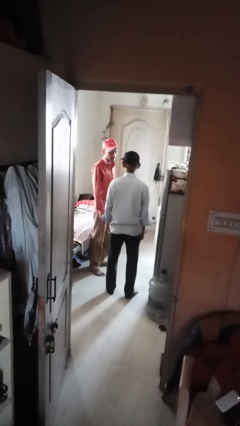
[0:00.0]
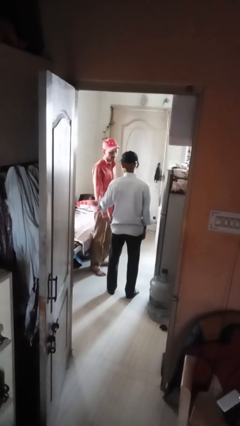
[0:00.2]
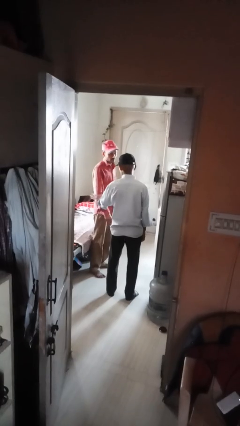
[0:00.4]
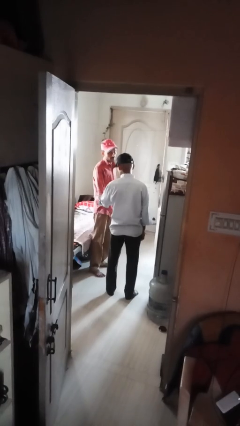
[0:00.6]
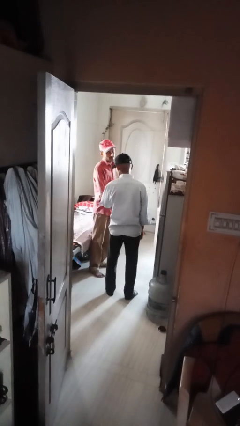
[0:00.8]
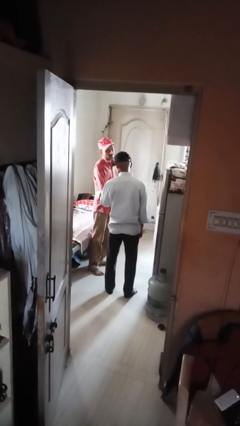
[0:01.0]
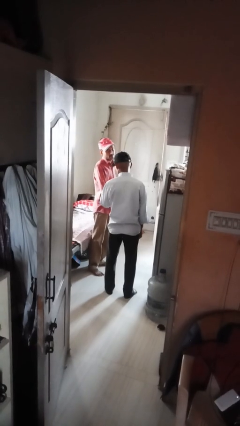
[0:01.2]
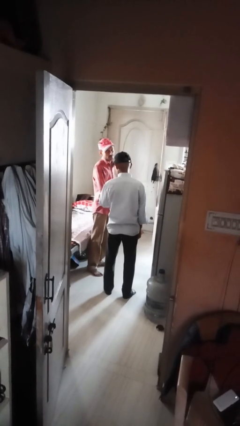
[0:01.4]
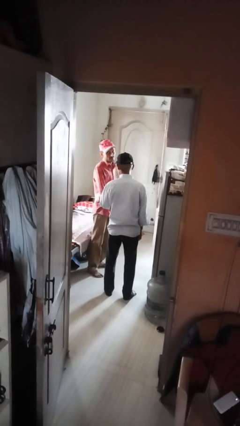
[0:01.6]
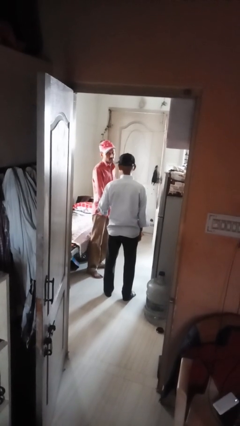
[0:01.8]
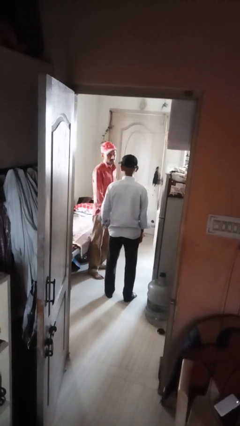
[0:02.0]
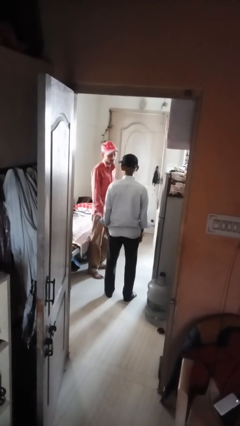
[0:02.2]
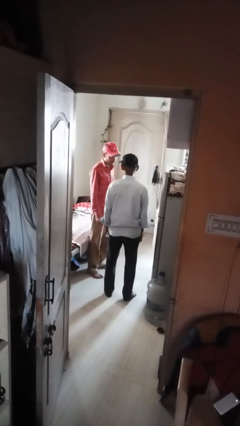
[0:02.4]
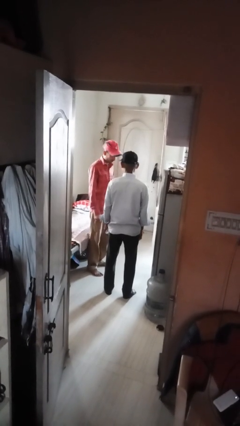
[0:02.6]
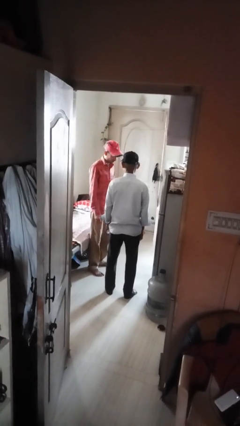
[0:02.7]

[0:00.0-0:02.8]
person grabs person by forearm

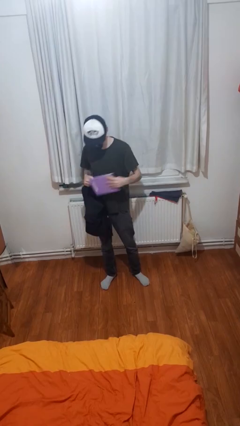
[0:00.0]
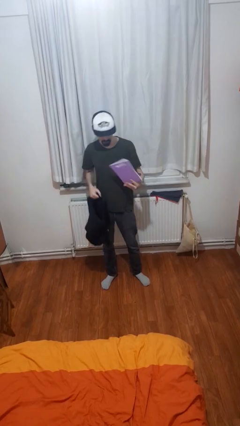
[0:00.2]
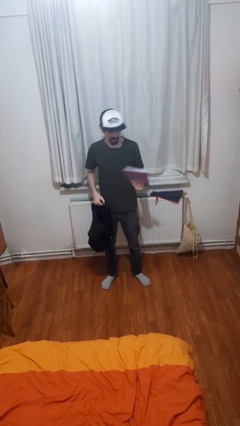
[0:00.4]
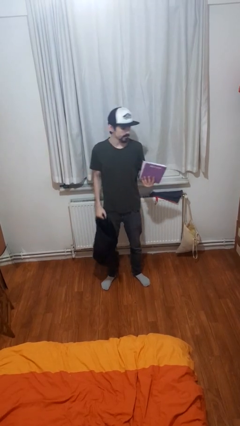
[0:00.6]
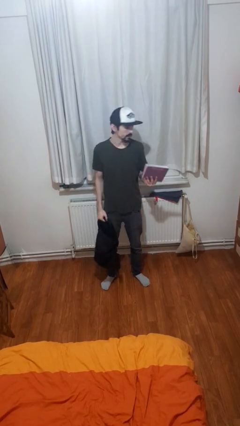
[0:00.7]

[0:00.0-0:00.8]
person takes object from backpack

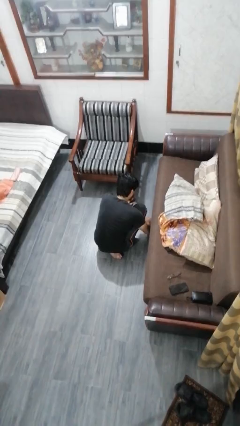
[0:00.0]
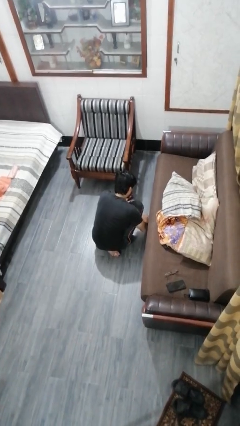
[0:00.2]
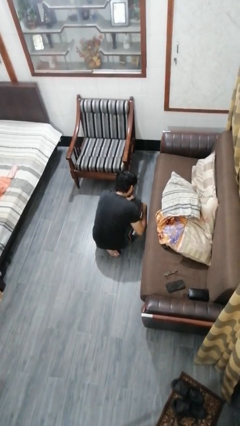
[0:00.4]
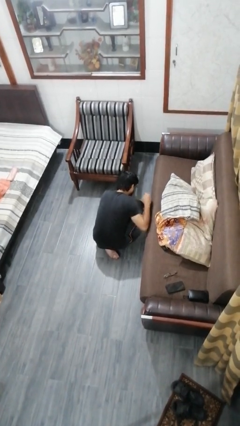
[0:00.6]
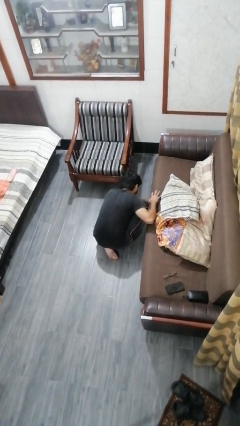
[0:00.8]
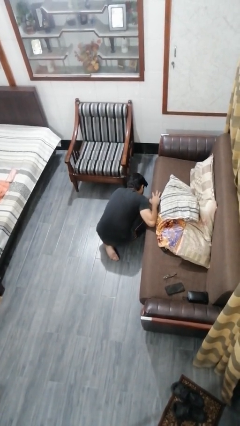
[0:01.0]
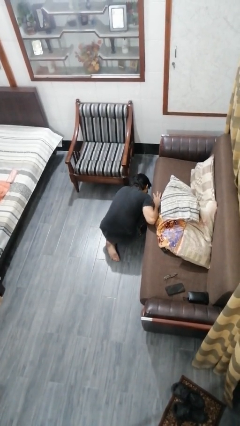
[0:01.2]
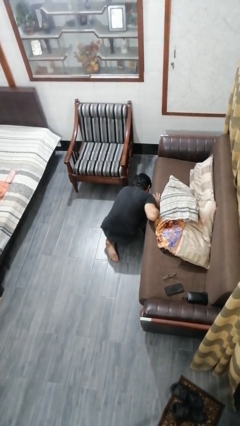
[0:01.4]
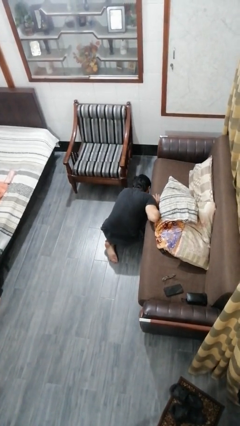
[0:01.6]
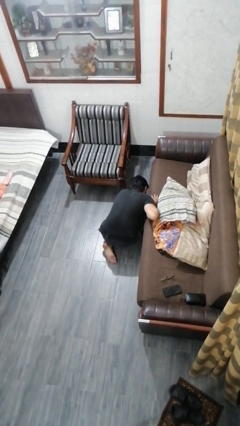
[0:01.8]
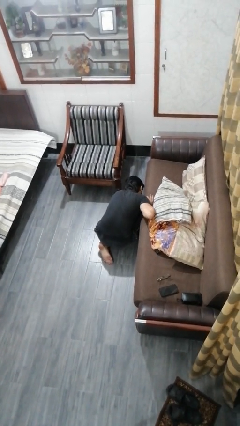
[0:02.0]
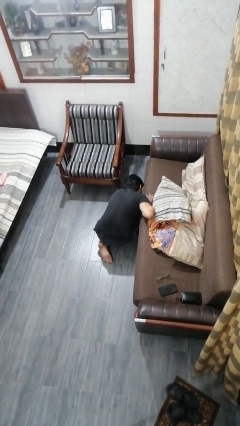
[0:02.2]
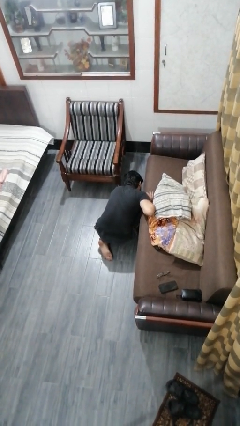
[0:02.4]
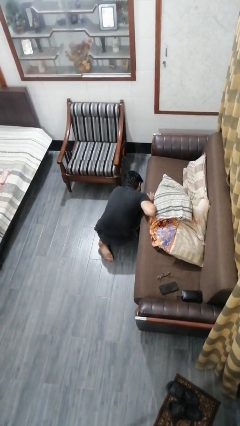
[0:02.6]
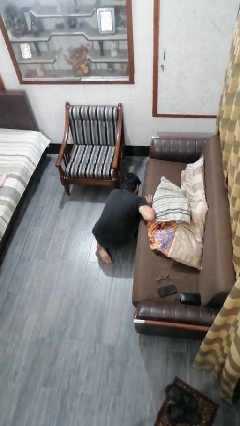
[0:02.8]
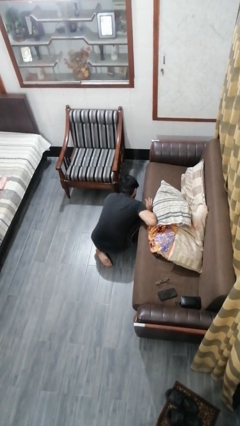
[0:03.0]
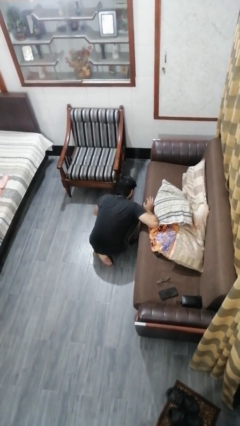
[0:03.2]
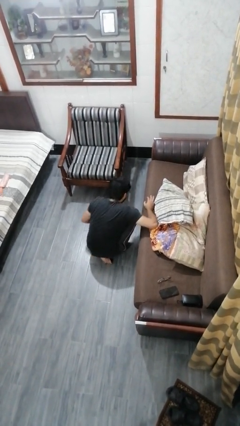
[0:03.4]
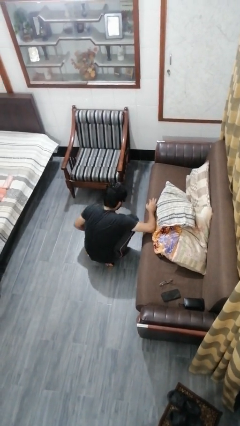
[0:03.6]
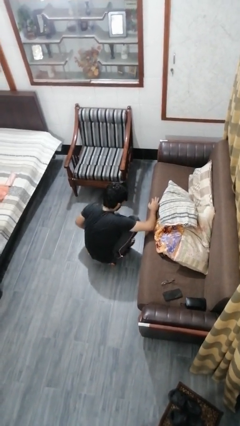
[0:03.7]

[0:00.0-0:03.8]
person searches under couch

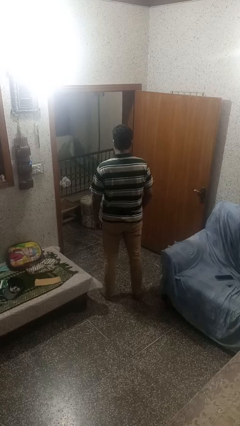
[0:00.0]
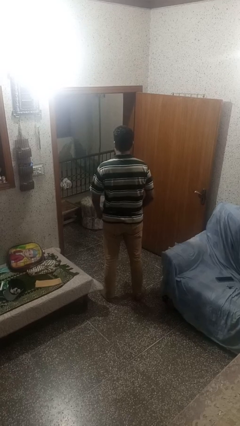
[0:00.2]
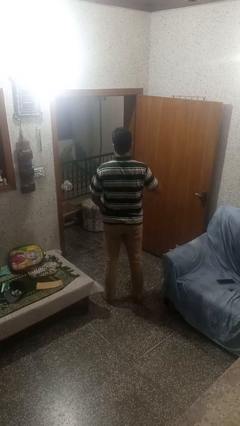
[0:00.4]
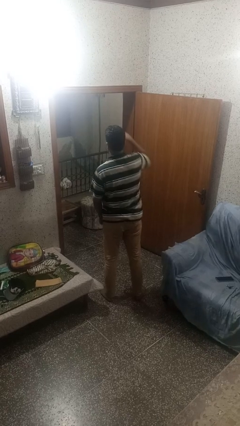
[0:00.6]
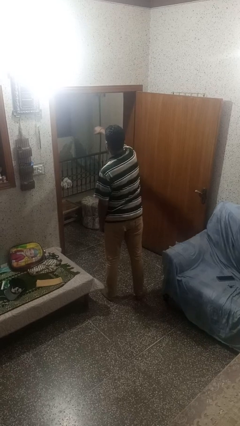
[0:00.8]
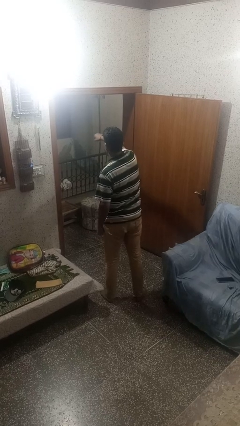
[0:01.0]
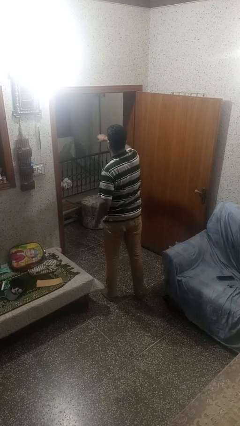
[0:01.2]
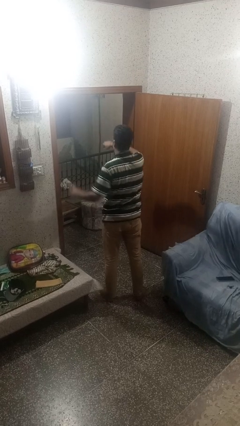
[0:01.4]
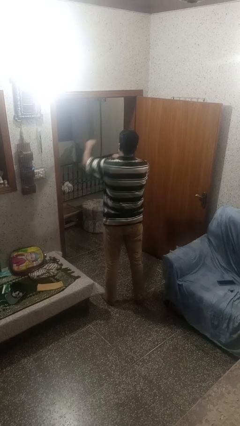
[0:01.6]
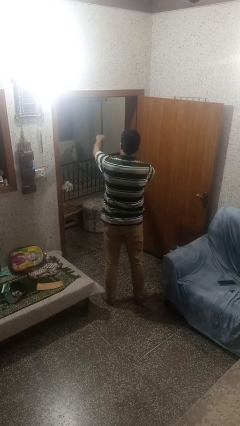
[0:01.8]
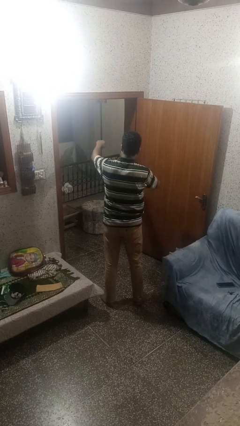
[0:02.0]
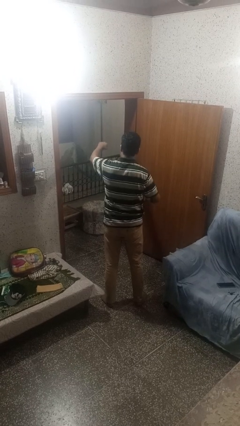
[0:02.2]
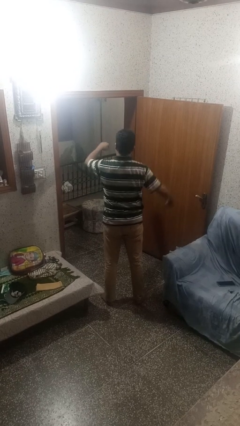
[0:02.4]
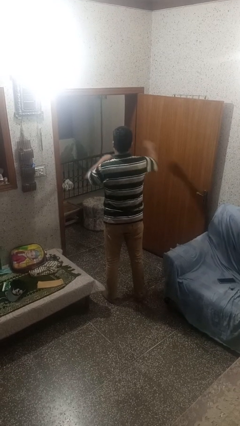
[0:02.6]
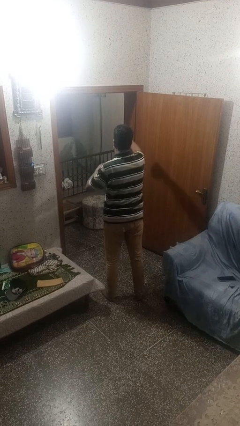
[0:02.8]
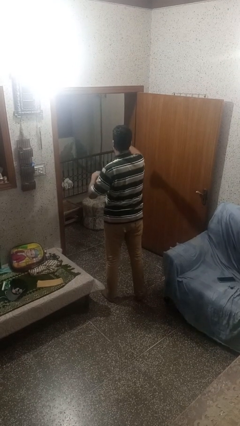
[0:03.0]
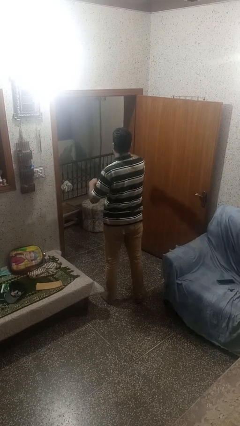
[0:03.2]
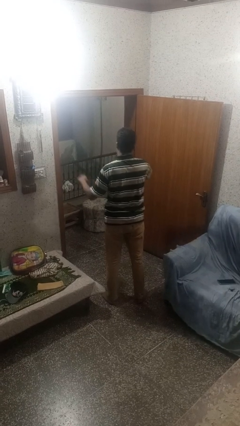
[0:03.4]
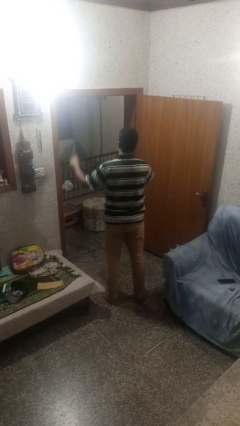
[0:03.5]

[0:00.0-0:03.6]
person punches

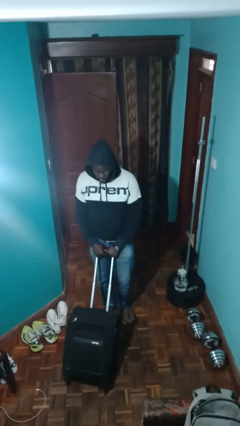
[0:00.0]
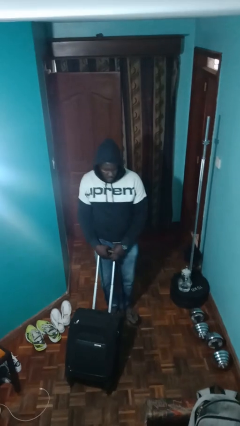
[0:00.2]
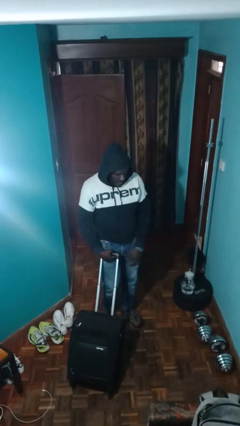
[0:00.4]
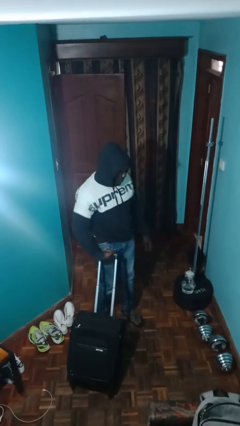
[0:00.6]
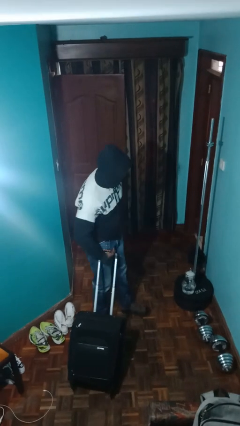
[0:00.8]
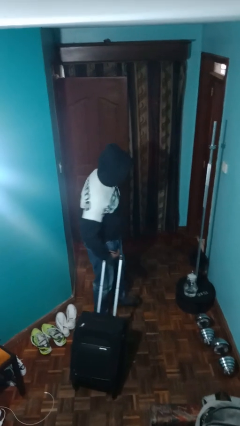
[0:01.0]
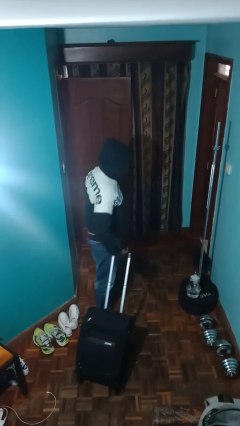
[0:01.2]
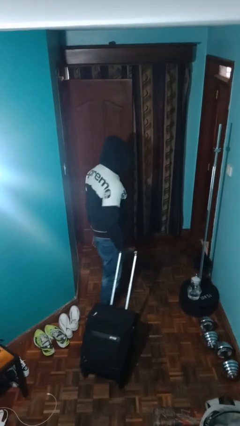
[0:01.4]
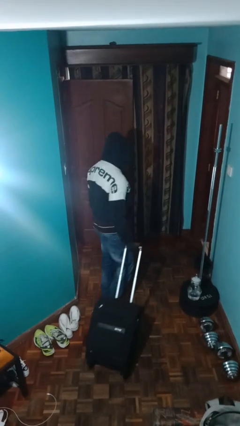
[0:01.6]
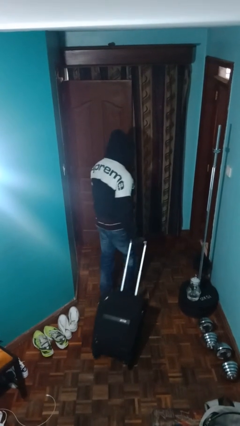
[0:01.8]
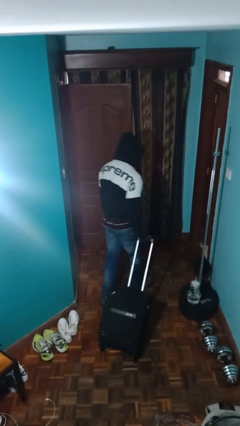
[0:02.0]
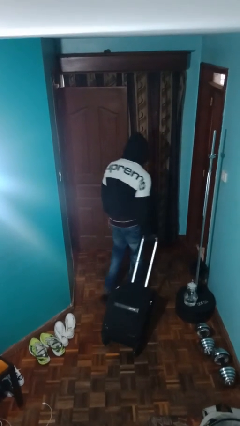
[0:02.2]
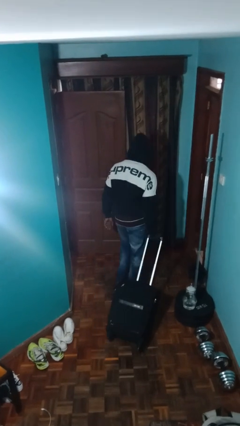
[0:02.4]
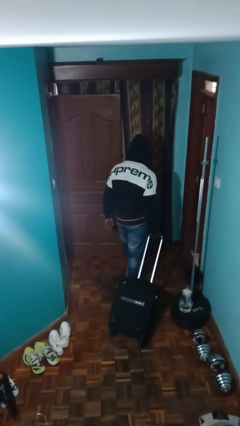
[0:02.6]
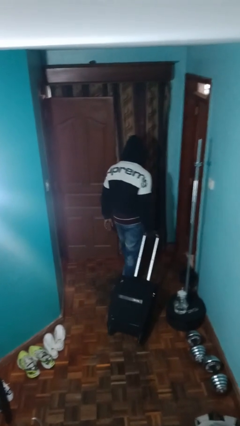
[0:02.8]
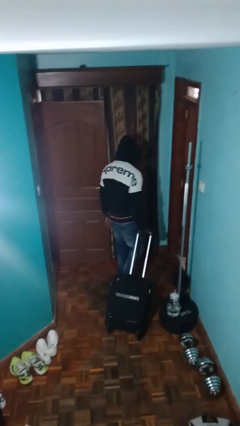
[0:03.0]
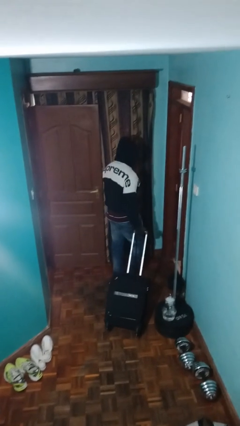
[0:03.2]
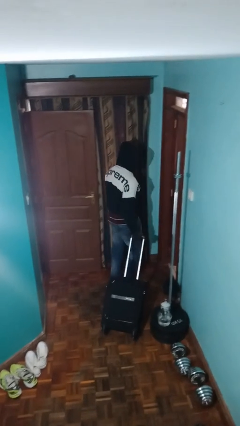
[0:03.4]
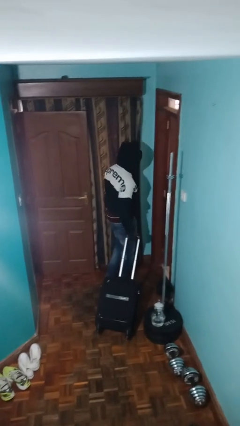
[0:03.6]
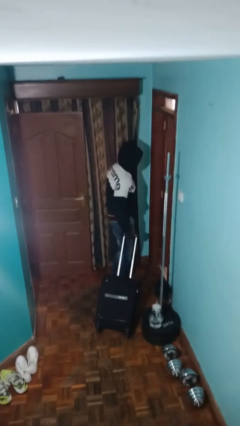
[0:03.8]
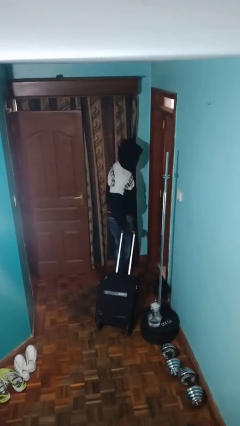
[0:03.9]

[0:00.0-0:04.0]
person pulls wheeled cart

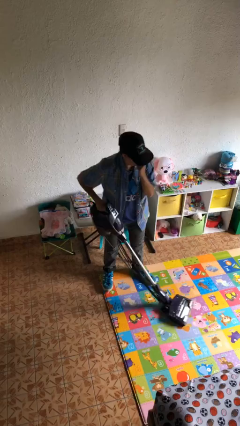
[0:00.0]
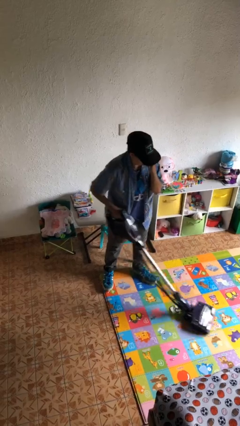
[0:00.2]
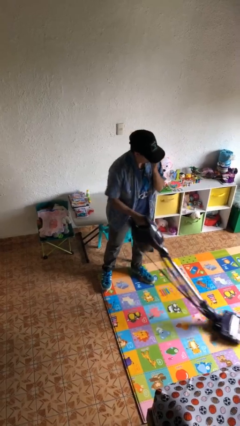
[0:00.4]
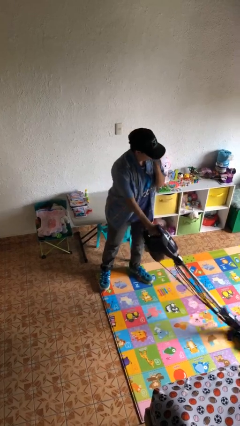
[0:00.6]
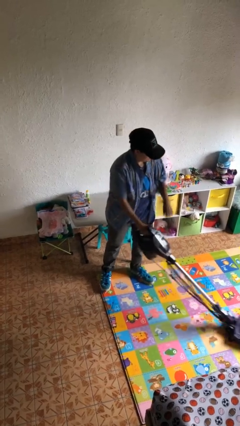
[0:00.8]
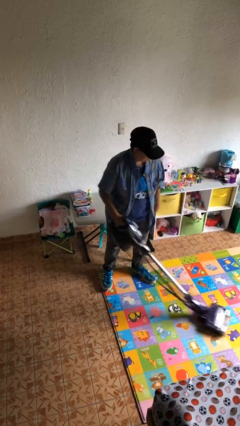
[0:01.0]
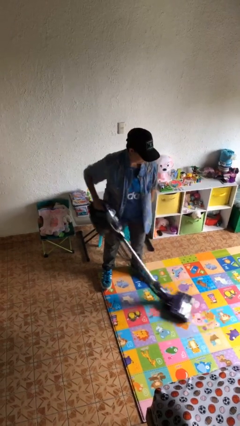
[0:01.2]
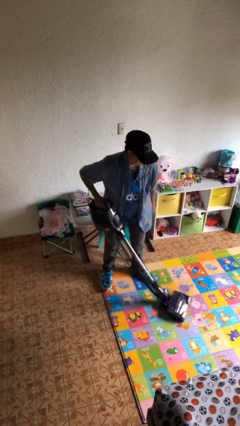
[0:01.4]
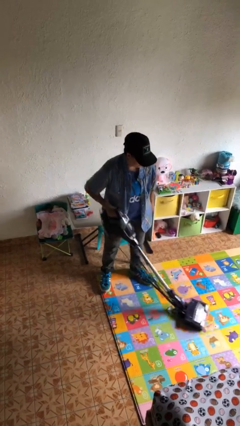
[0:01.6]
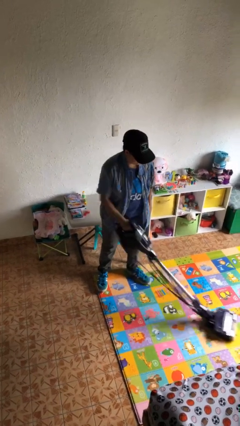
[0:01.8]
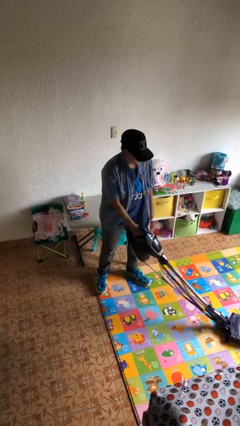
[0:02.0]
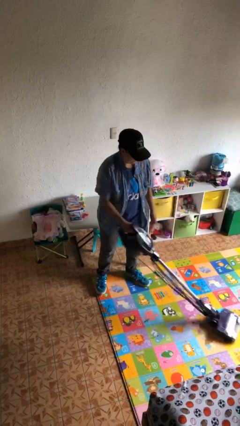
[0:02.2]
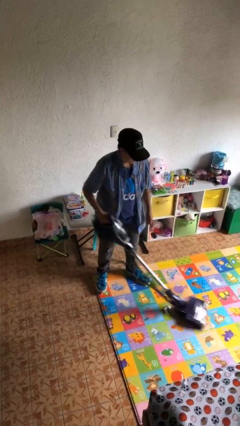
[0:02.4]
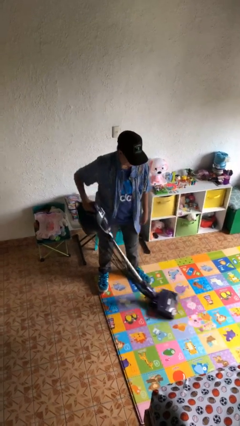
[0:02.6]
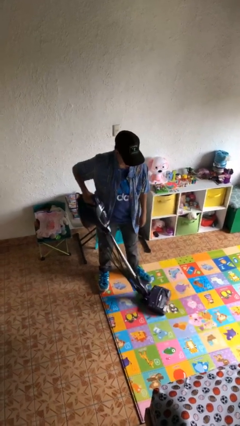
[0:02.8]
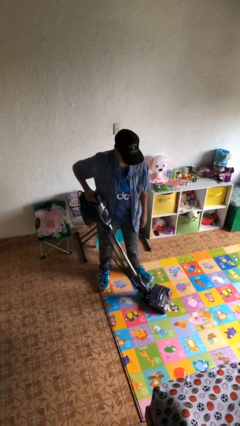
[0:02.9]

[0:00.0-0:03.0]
person vacuums carpet

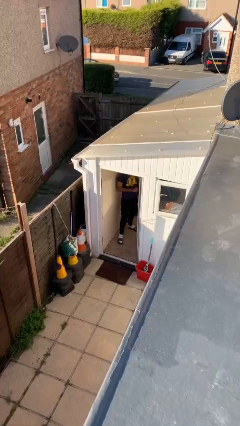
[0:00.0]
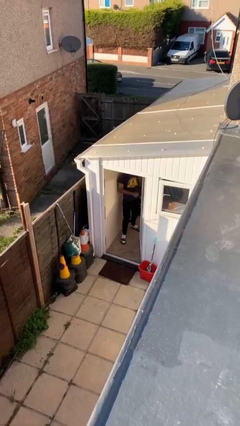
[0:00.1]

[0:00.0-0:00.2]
person enters scene through structure
